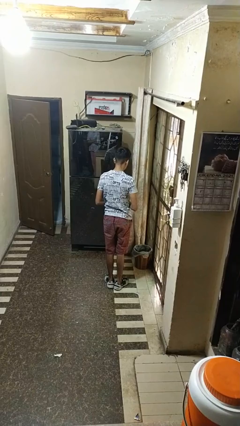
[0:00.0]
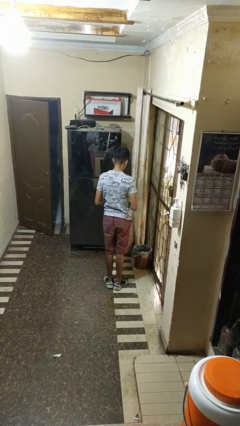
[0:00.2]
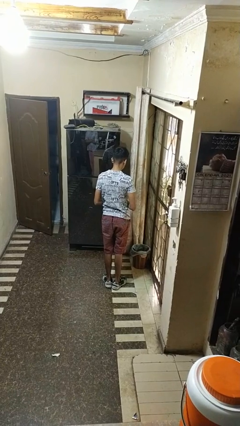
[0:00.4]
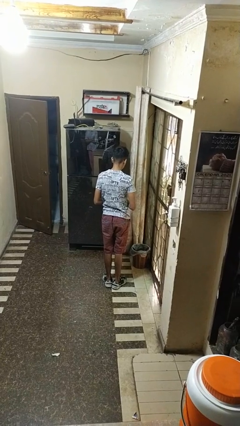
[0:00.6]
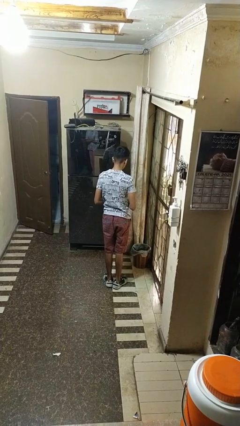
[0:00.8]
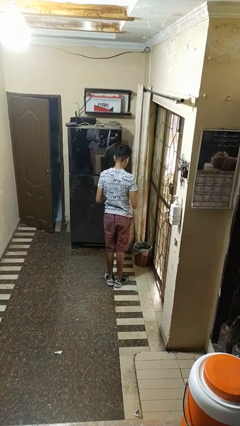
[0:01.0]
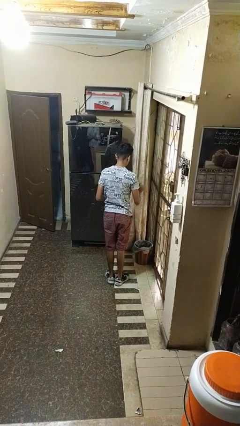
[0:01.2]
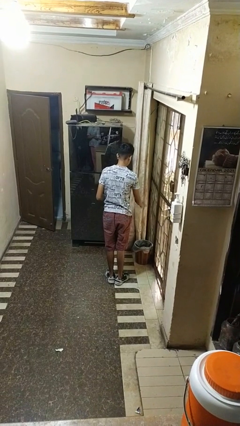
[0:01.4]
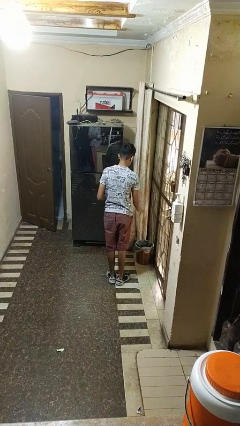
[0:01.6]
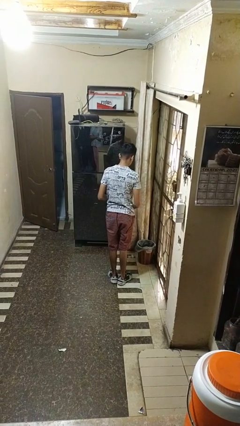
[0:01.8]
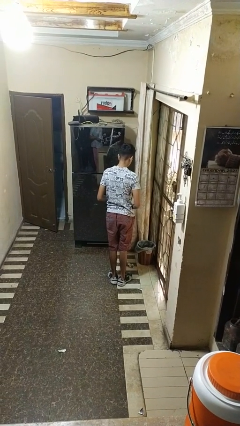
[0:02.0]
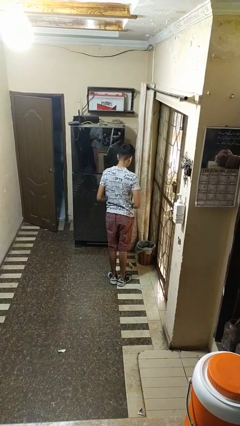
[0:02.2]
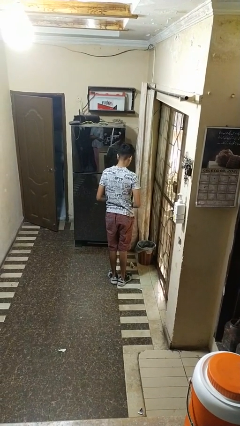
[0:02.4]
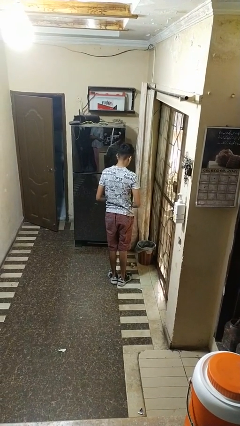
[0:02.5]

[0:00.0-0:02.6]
person discards trash

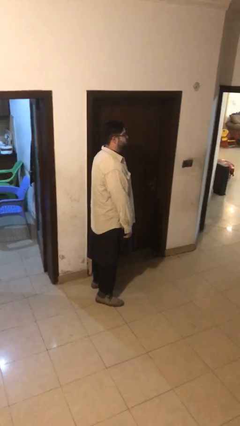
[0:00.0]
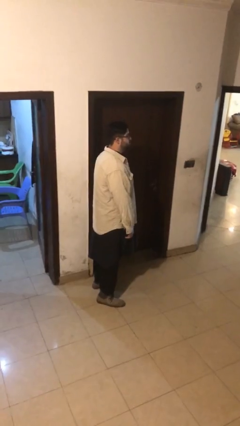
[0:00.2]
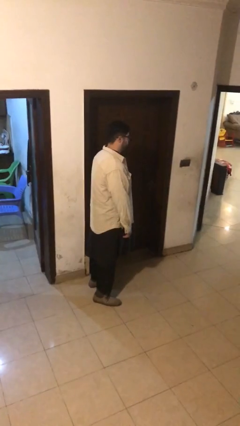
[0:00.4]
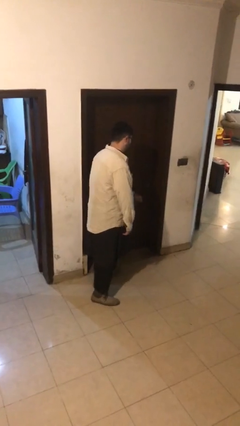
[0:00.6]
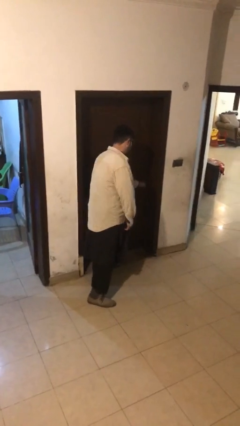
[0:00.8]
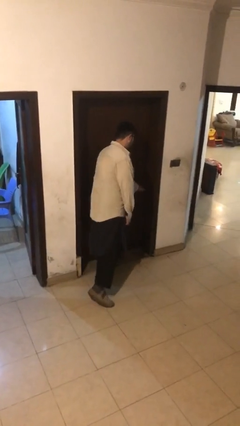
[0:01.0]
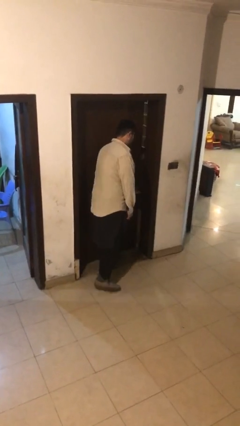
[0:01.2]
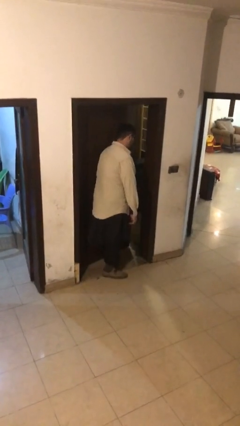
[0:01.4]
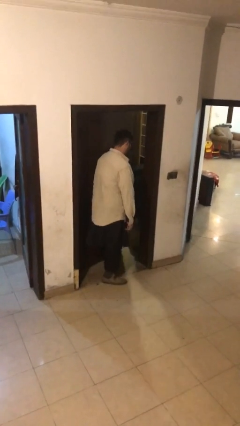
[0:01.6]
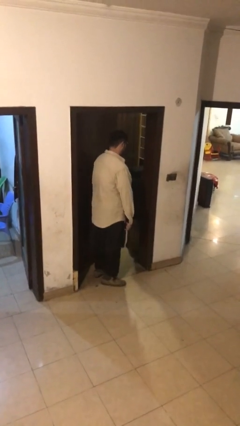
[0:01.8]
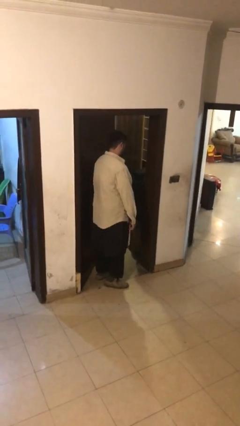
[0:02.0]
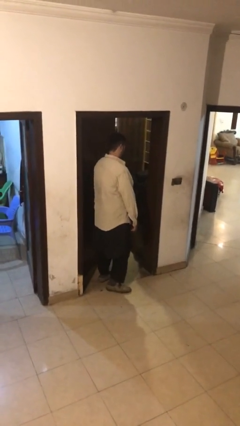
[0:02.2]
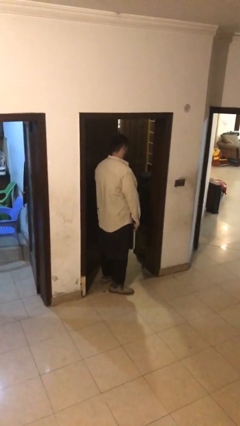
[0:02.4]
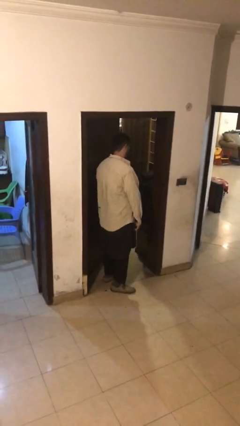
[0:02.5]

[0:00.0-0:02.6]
person opens facility door

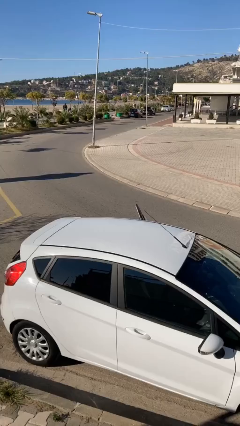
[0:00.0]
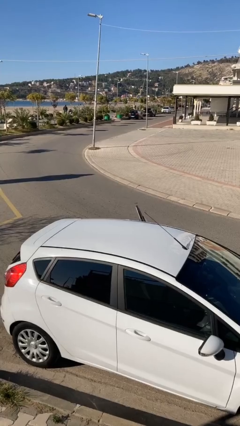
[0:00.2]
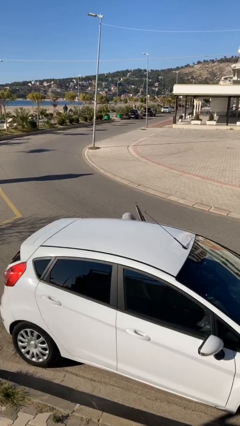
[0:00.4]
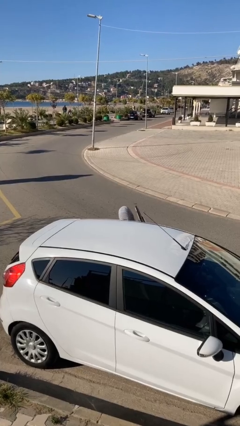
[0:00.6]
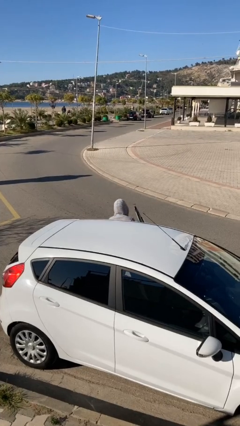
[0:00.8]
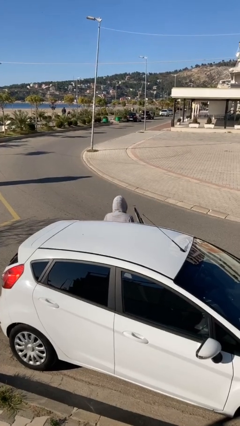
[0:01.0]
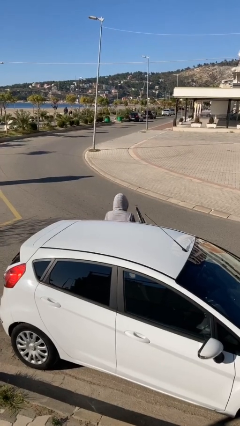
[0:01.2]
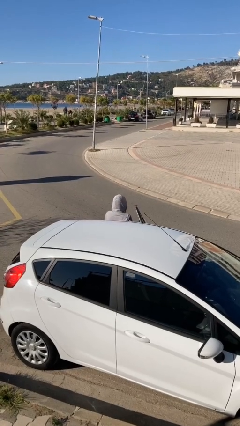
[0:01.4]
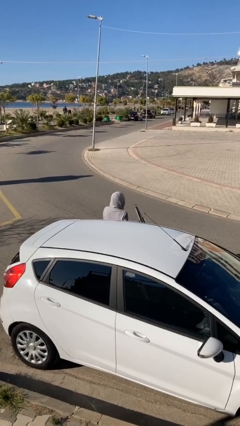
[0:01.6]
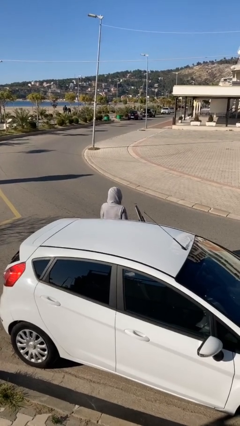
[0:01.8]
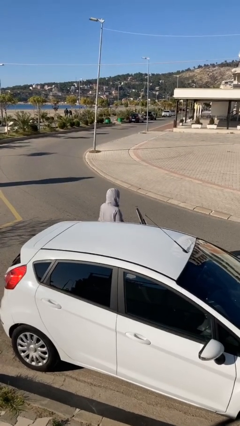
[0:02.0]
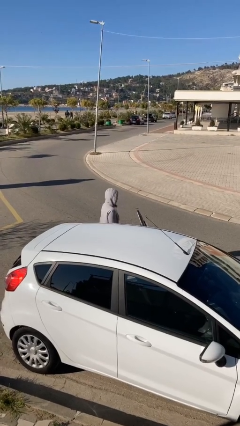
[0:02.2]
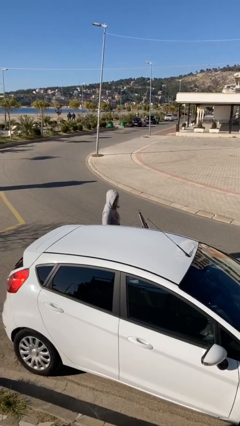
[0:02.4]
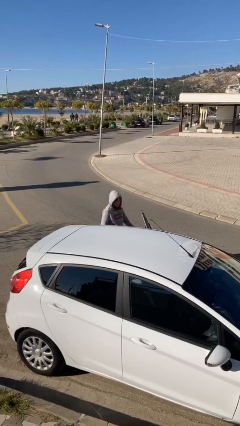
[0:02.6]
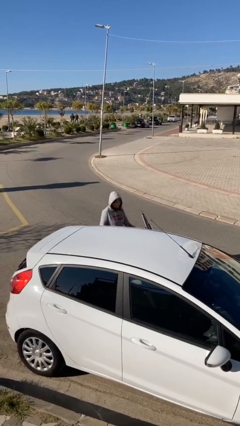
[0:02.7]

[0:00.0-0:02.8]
person exits car

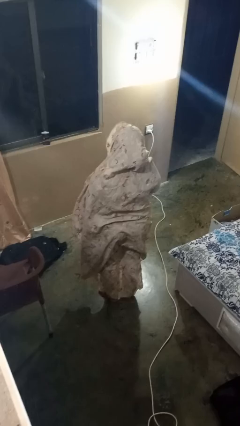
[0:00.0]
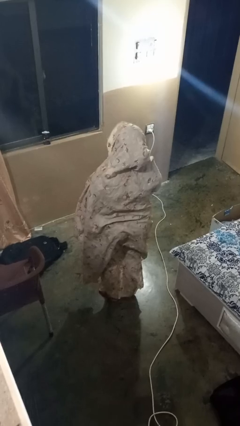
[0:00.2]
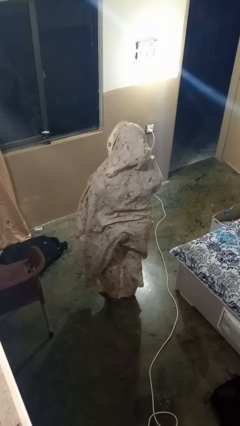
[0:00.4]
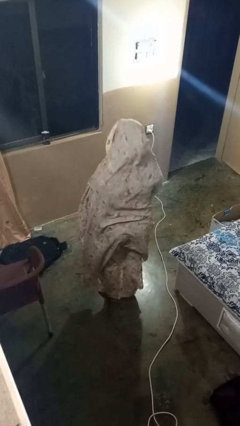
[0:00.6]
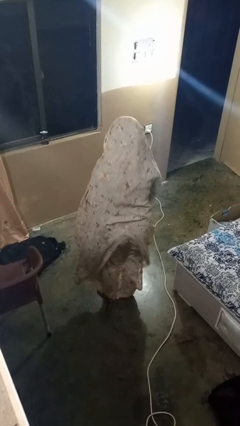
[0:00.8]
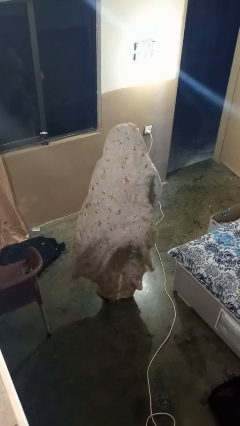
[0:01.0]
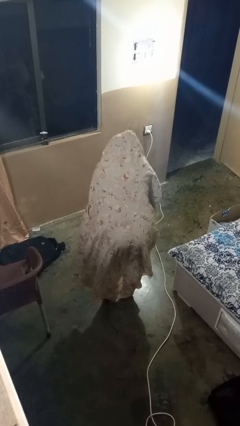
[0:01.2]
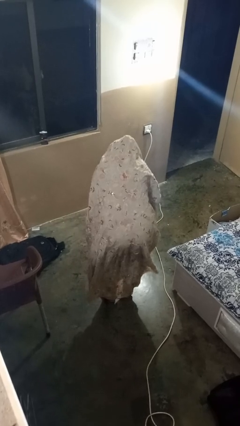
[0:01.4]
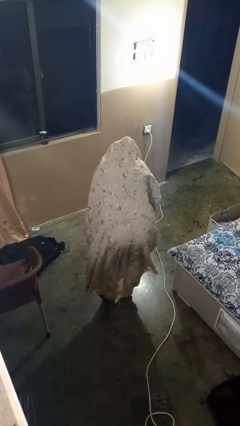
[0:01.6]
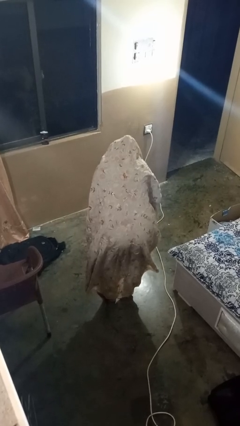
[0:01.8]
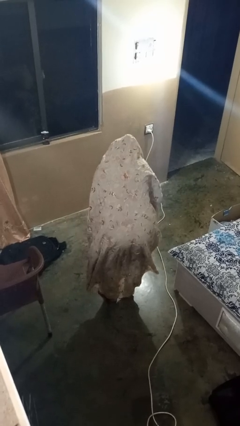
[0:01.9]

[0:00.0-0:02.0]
person bows

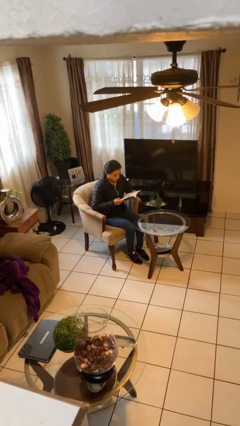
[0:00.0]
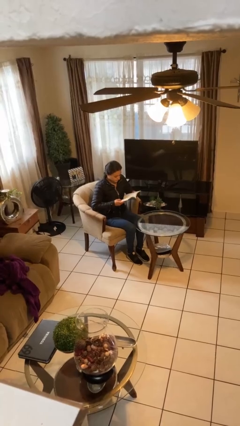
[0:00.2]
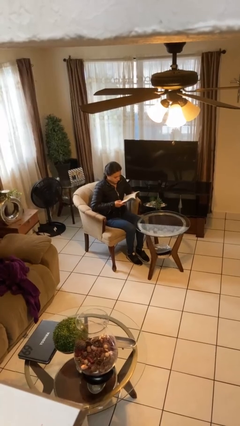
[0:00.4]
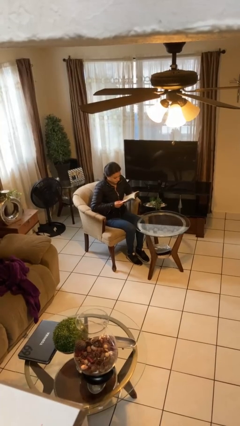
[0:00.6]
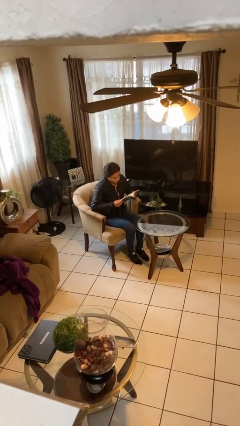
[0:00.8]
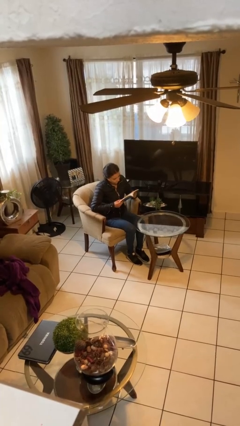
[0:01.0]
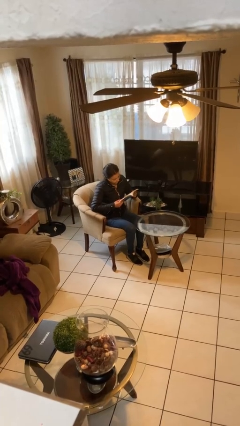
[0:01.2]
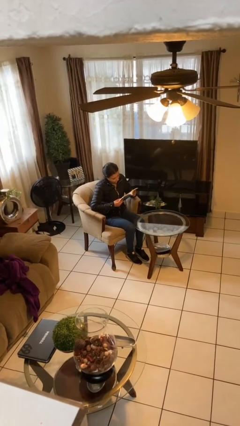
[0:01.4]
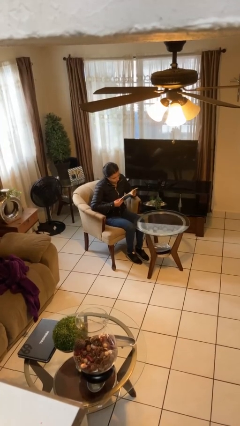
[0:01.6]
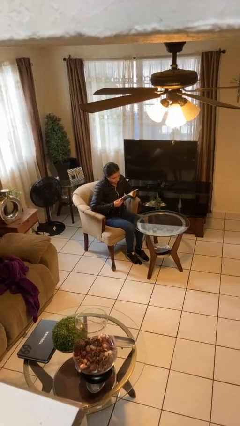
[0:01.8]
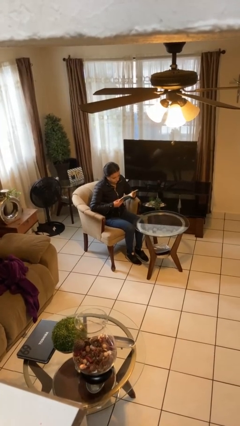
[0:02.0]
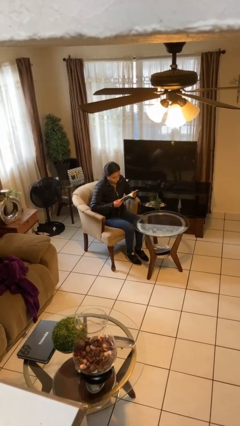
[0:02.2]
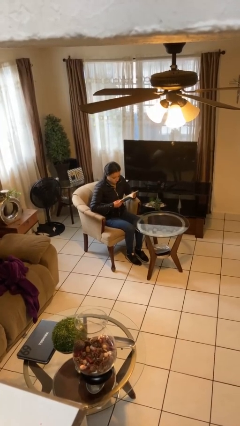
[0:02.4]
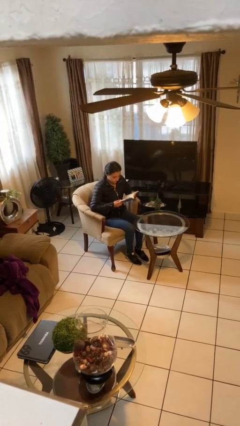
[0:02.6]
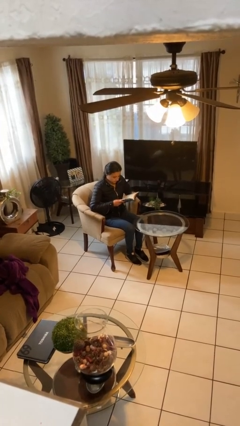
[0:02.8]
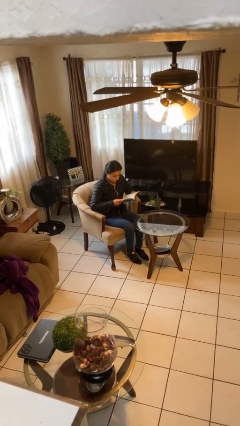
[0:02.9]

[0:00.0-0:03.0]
person reads document

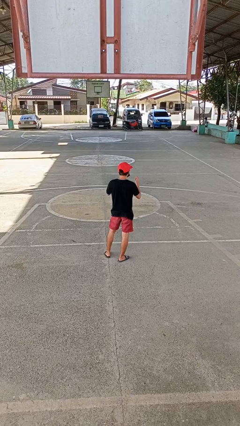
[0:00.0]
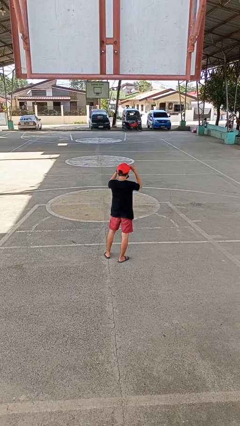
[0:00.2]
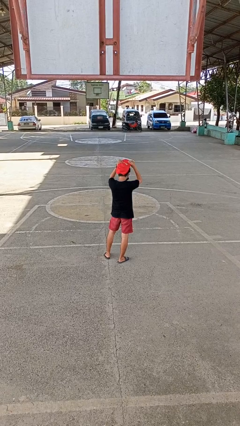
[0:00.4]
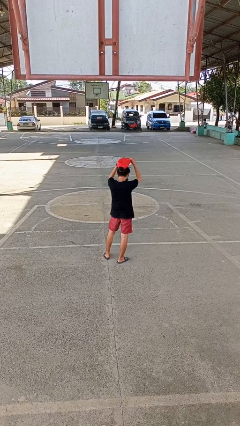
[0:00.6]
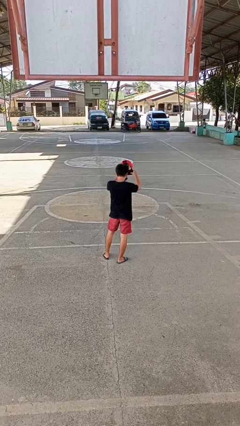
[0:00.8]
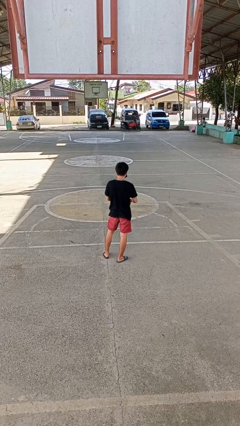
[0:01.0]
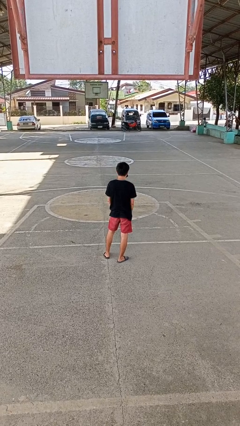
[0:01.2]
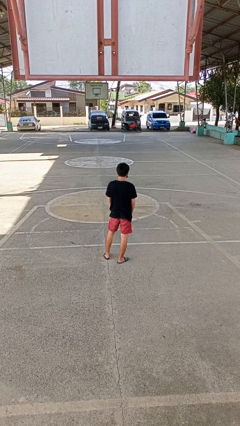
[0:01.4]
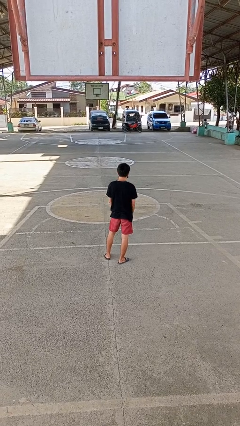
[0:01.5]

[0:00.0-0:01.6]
person takes off hat

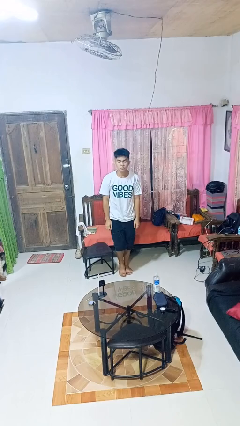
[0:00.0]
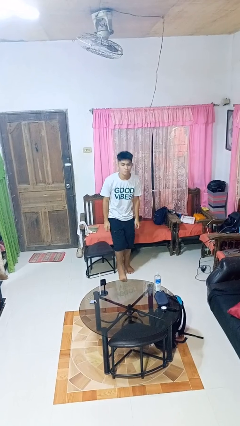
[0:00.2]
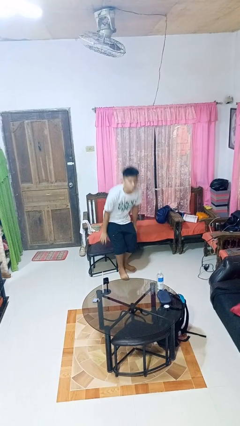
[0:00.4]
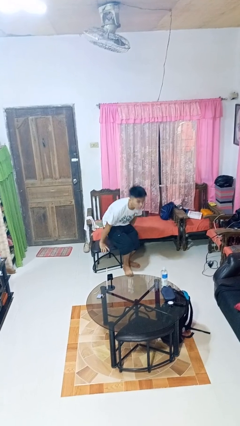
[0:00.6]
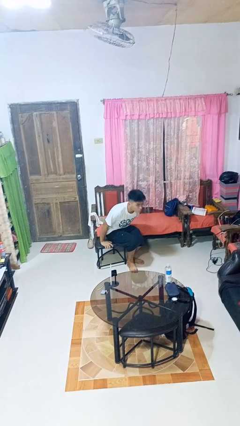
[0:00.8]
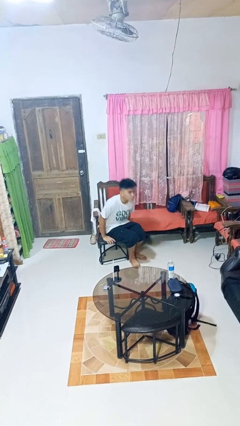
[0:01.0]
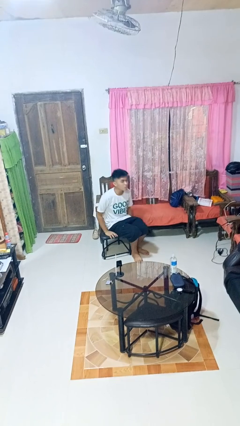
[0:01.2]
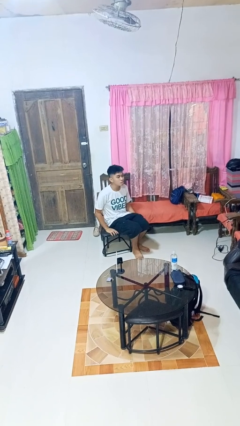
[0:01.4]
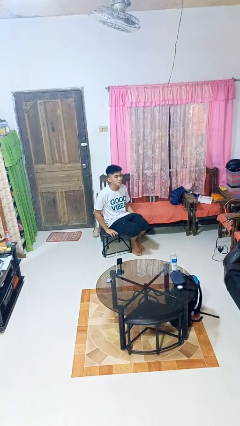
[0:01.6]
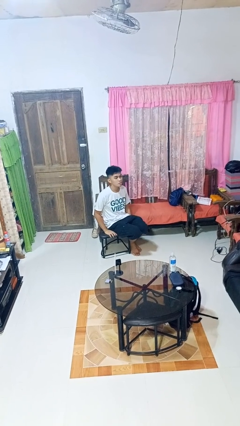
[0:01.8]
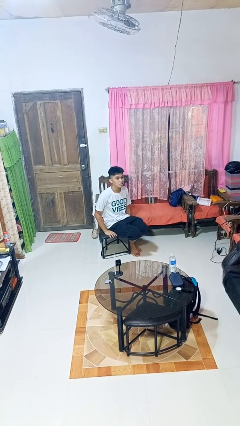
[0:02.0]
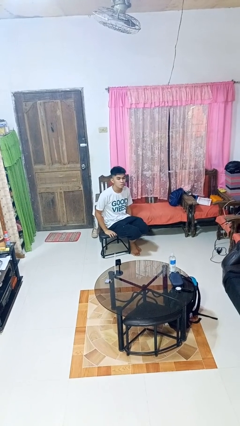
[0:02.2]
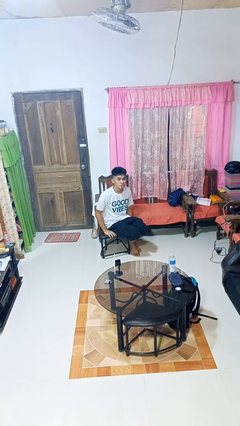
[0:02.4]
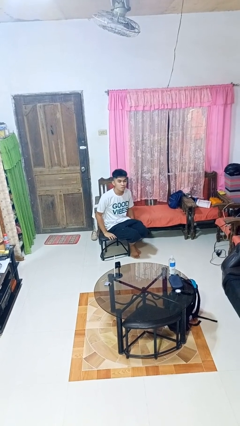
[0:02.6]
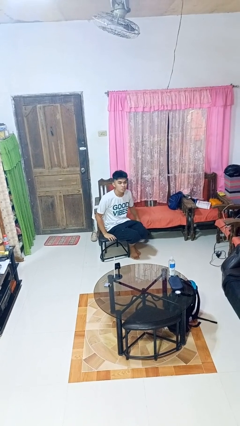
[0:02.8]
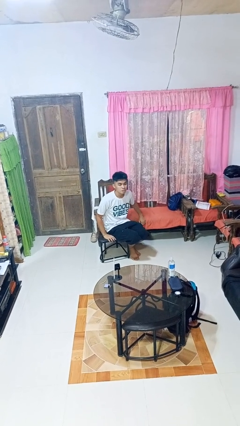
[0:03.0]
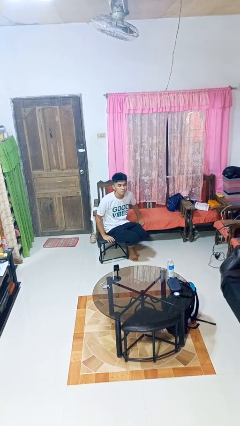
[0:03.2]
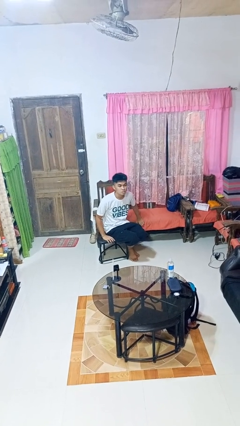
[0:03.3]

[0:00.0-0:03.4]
person sits down
